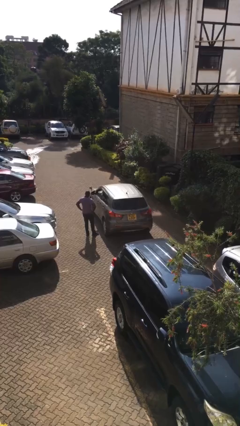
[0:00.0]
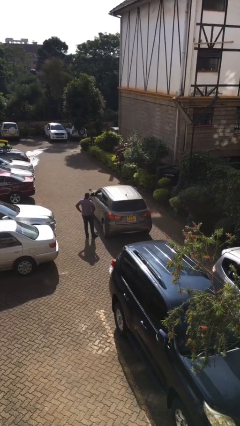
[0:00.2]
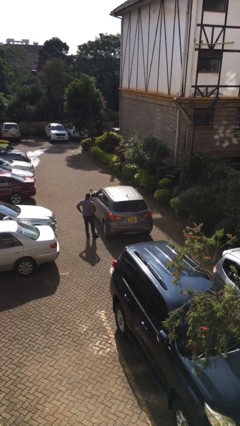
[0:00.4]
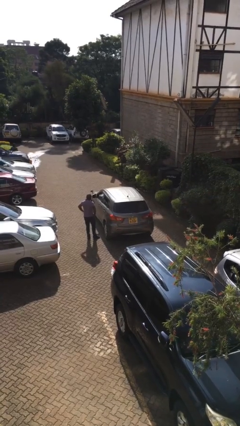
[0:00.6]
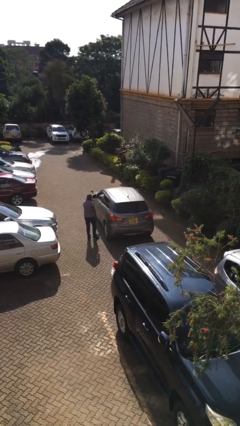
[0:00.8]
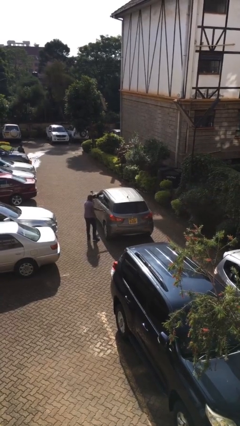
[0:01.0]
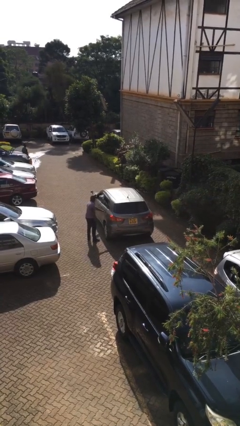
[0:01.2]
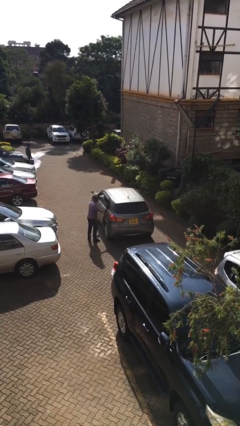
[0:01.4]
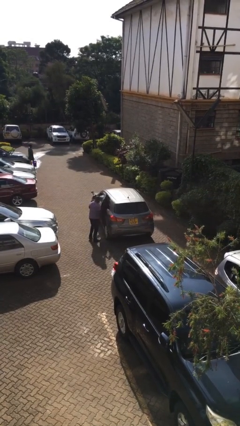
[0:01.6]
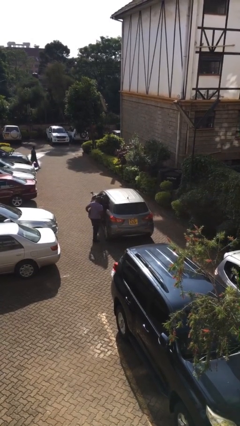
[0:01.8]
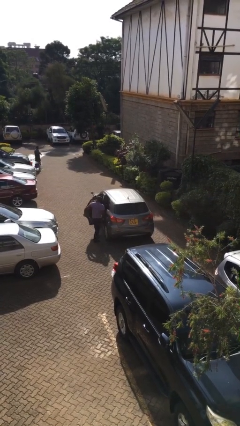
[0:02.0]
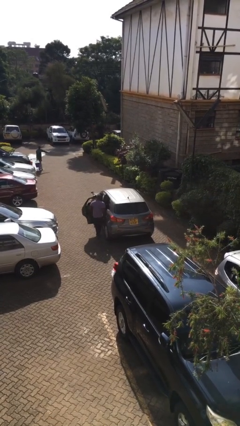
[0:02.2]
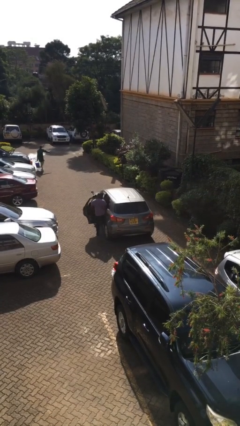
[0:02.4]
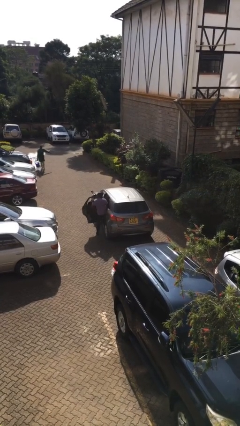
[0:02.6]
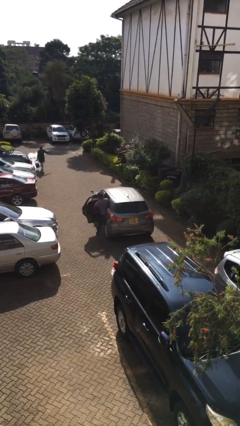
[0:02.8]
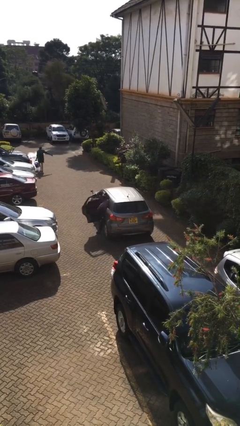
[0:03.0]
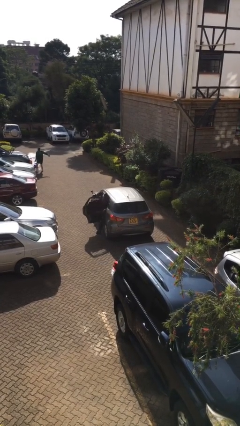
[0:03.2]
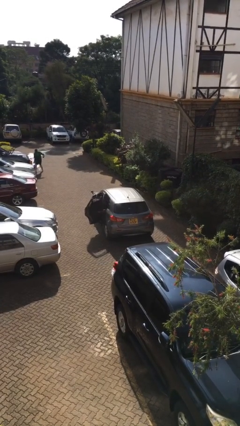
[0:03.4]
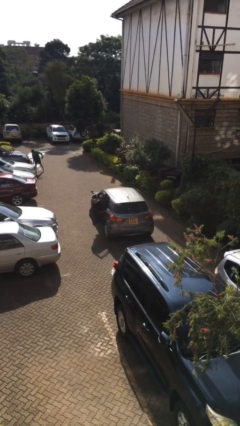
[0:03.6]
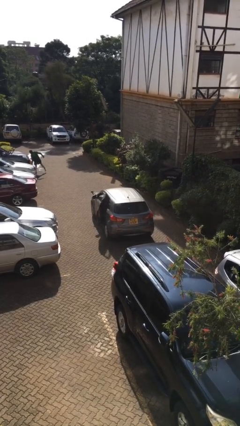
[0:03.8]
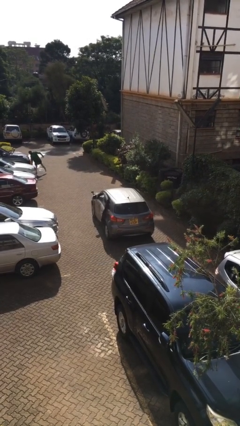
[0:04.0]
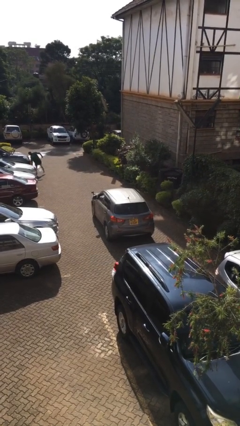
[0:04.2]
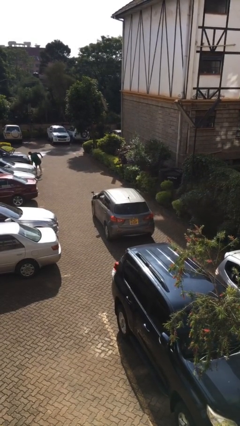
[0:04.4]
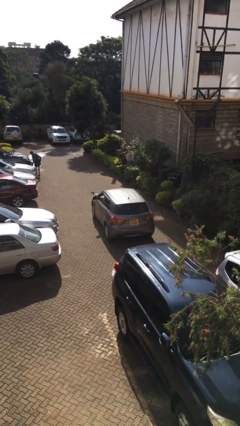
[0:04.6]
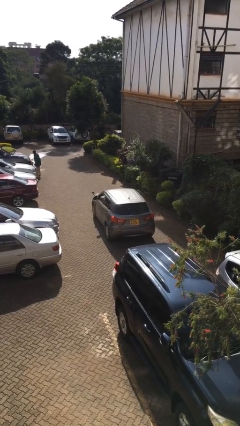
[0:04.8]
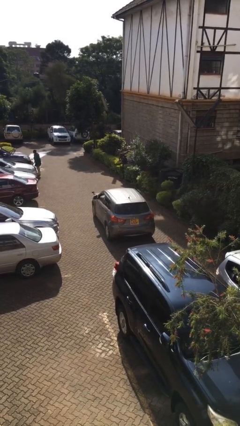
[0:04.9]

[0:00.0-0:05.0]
car picks up person

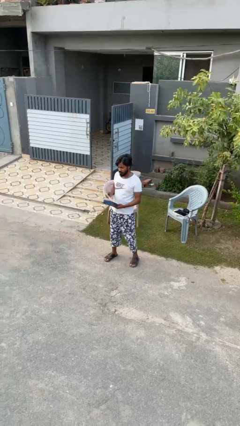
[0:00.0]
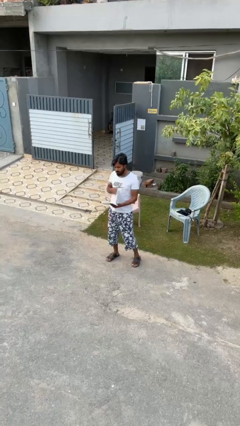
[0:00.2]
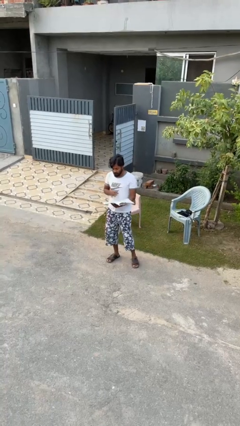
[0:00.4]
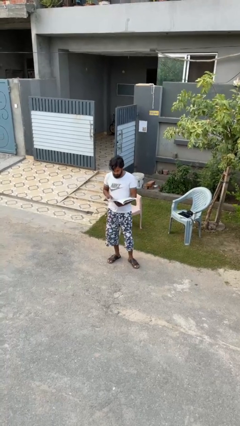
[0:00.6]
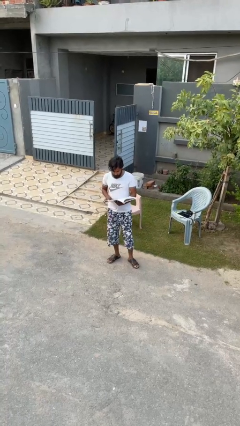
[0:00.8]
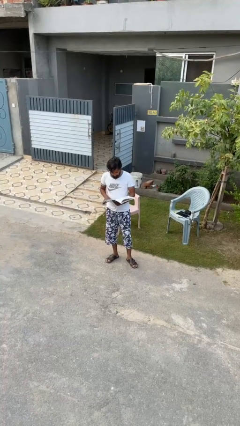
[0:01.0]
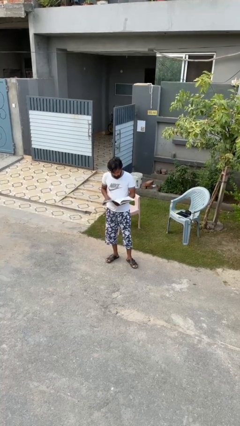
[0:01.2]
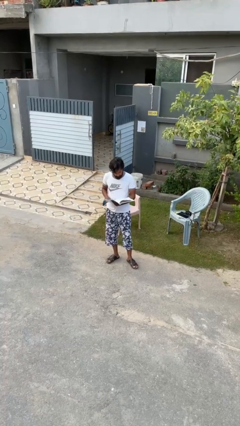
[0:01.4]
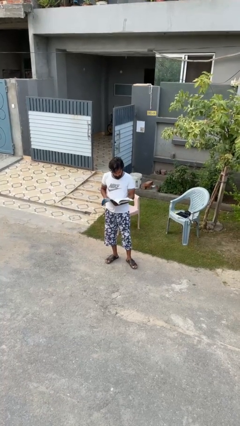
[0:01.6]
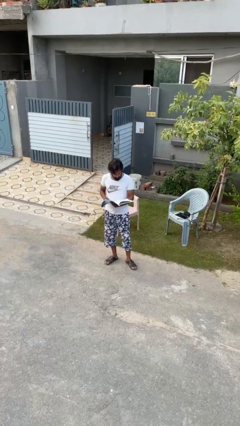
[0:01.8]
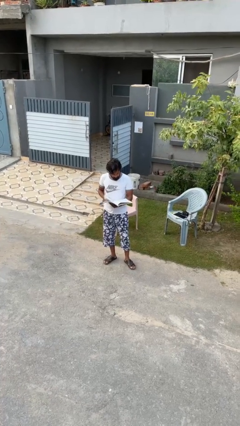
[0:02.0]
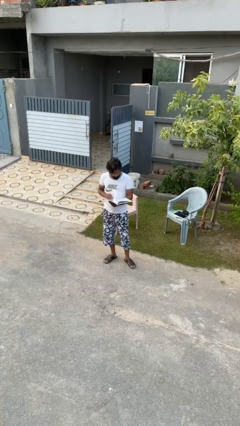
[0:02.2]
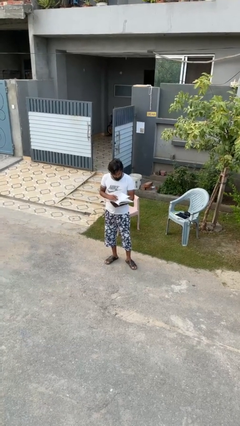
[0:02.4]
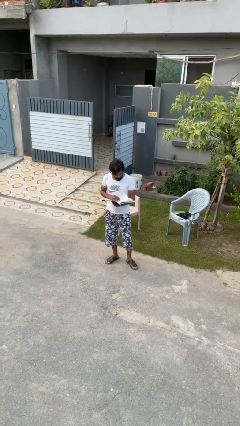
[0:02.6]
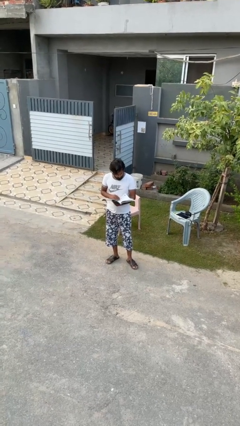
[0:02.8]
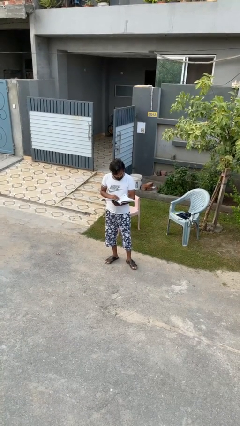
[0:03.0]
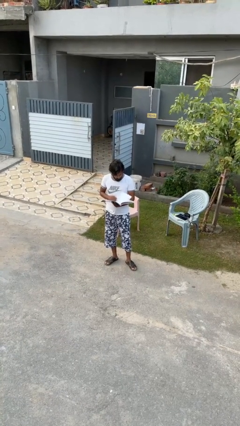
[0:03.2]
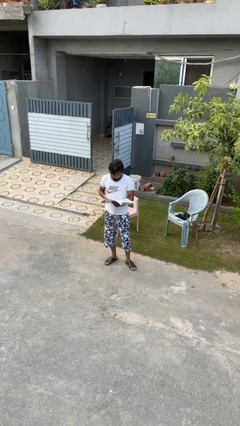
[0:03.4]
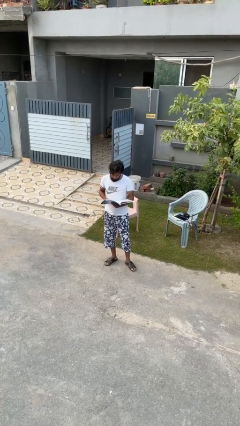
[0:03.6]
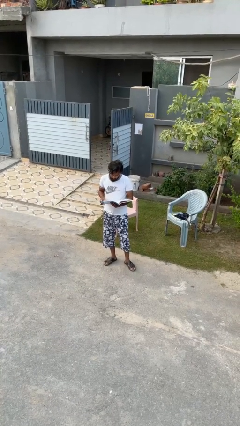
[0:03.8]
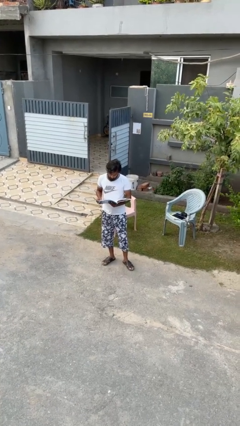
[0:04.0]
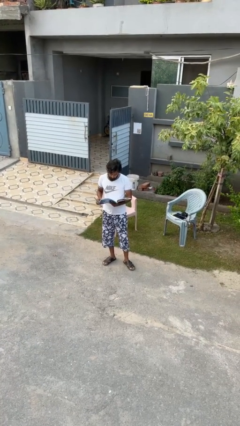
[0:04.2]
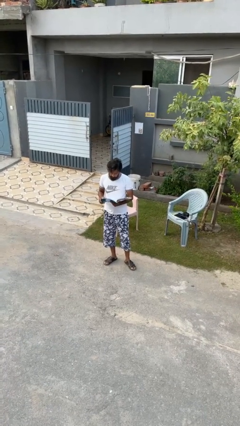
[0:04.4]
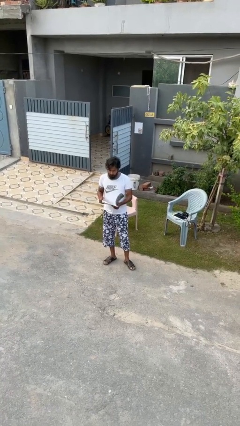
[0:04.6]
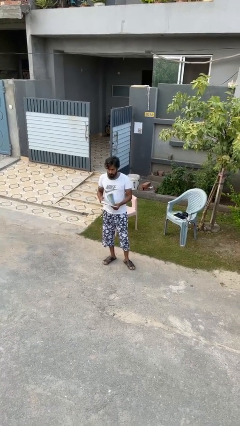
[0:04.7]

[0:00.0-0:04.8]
person reads book

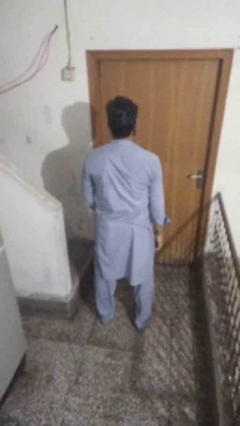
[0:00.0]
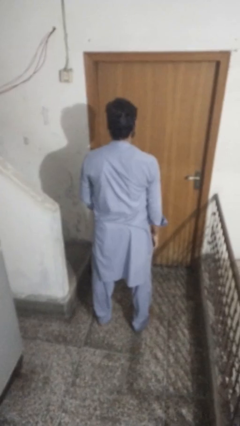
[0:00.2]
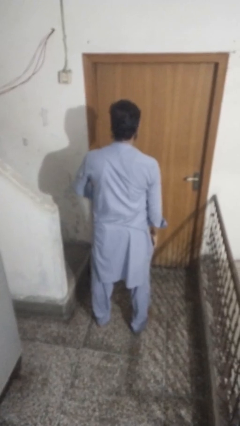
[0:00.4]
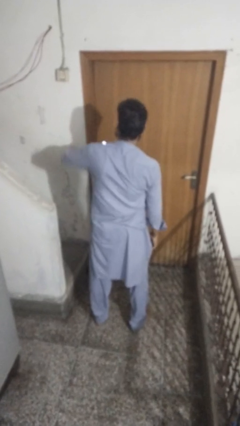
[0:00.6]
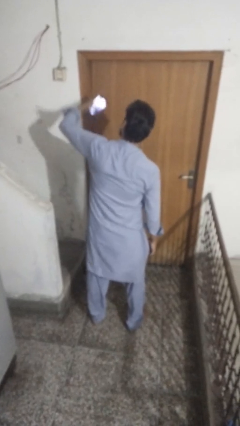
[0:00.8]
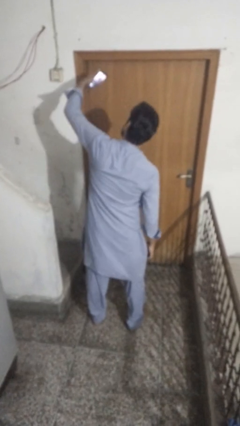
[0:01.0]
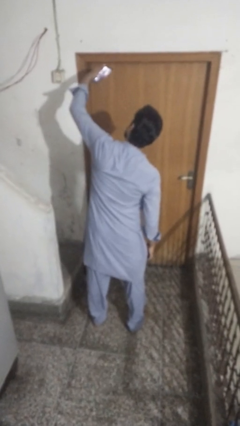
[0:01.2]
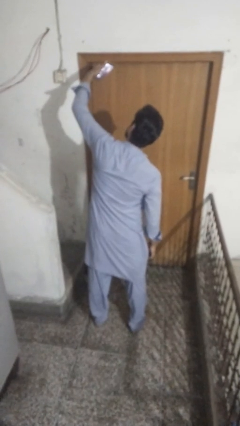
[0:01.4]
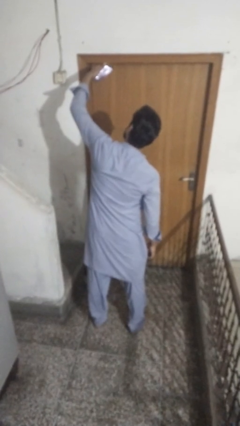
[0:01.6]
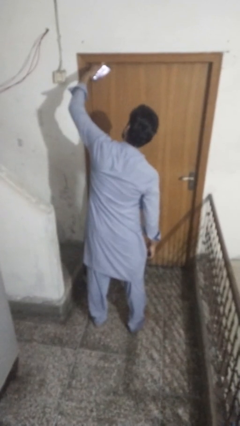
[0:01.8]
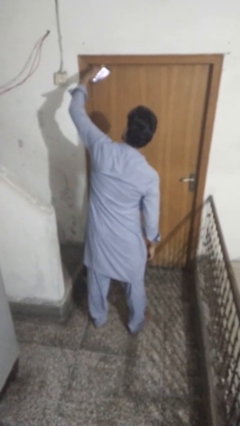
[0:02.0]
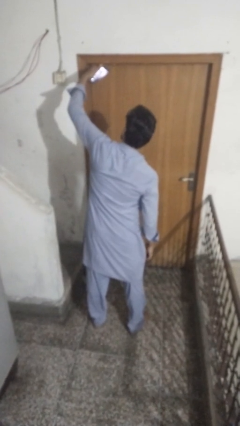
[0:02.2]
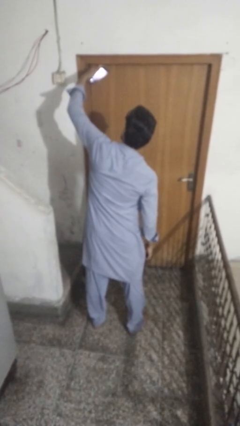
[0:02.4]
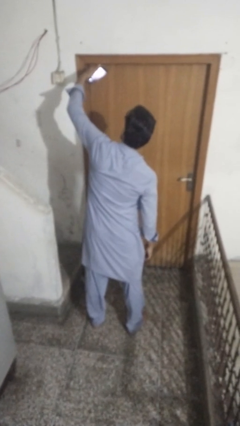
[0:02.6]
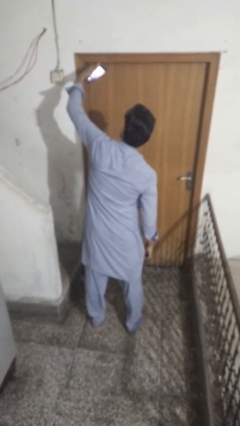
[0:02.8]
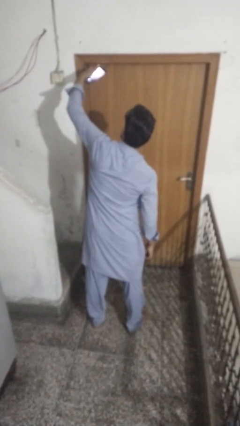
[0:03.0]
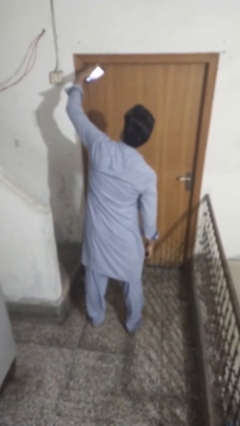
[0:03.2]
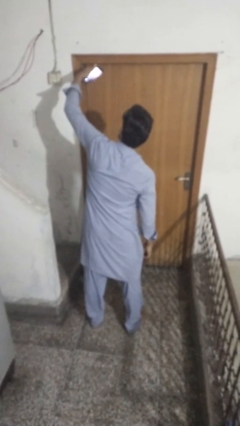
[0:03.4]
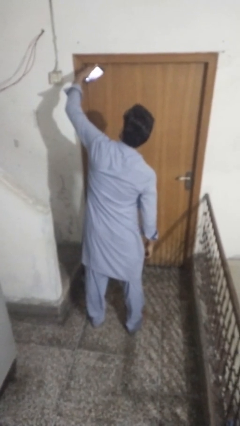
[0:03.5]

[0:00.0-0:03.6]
person takes selfie

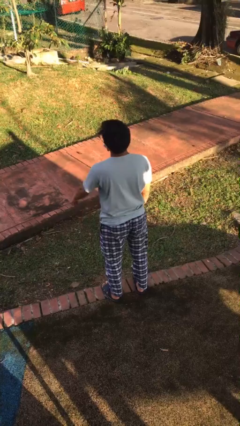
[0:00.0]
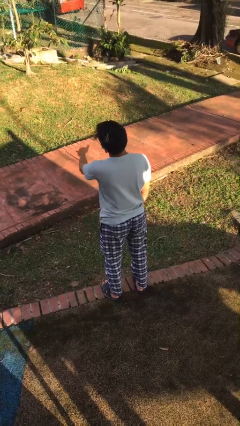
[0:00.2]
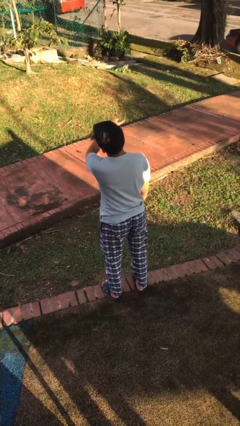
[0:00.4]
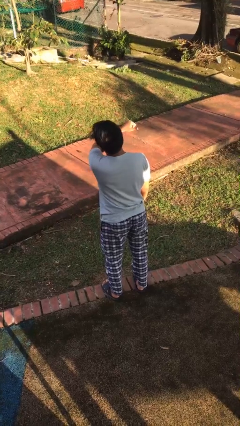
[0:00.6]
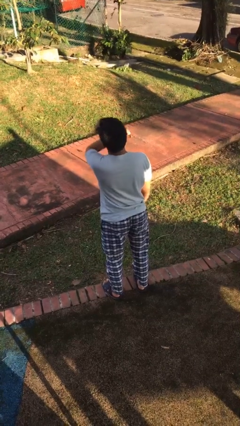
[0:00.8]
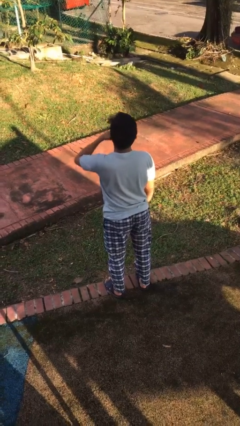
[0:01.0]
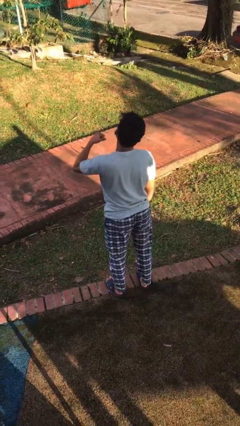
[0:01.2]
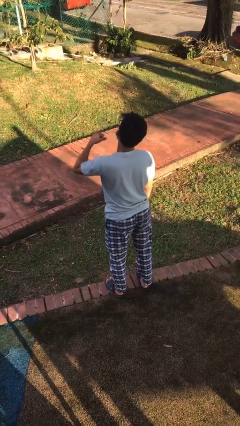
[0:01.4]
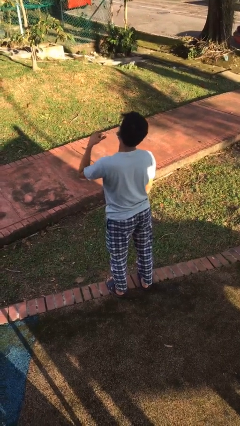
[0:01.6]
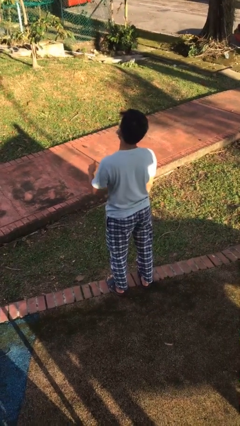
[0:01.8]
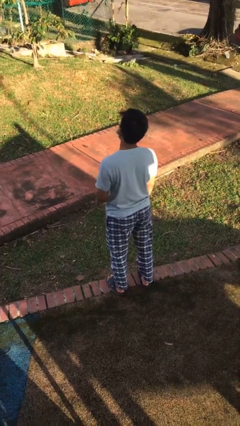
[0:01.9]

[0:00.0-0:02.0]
person gestures cut

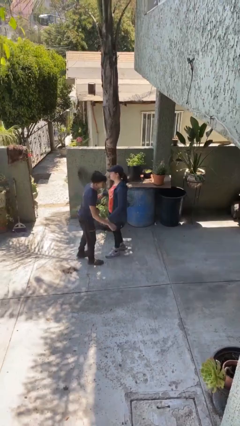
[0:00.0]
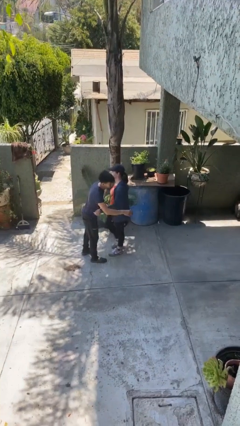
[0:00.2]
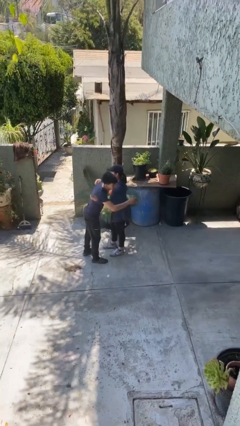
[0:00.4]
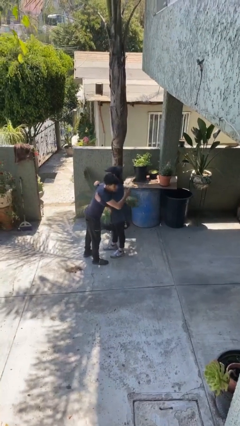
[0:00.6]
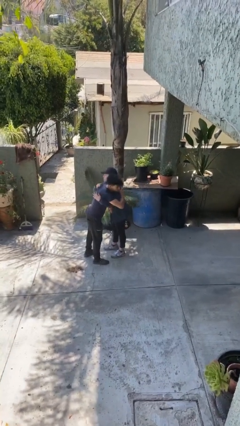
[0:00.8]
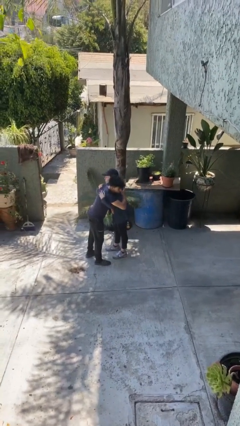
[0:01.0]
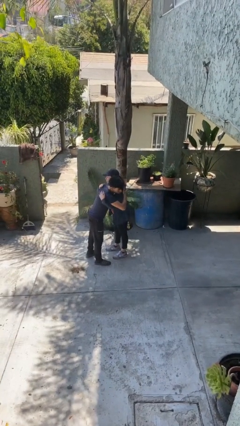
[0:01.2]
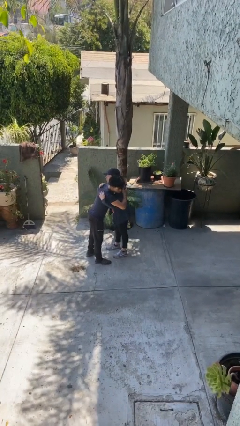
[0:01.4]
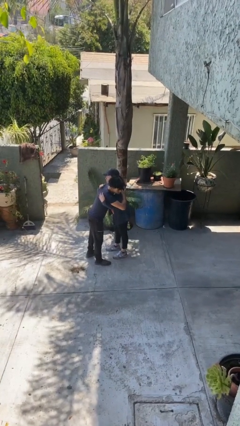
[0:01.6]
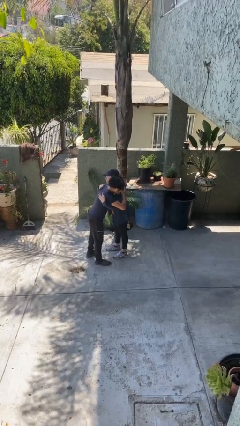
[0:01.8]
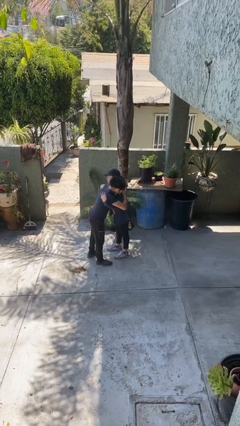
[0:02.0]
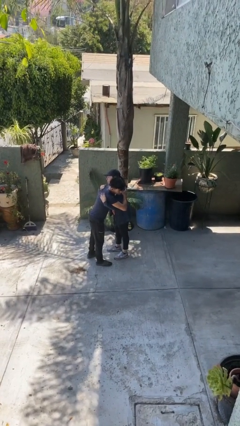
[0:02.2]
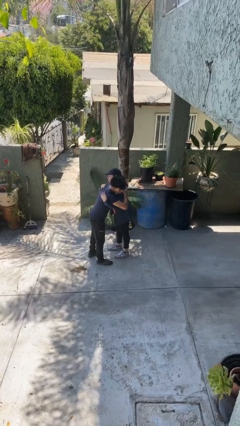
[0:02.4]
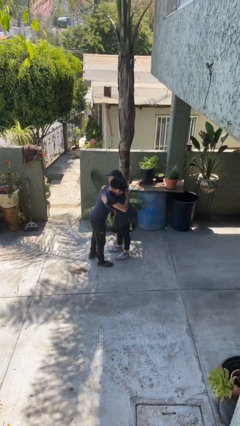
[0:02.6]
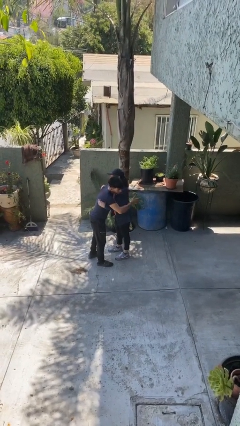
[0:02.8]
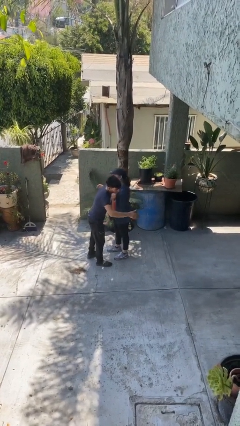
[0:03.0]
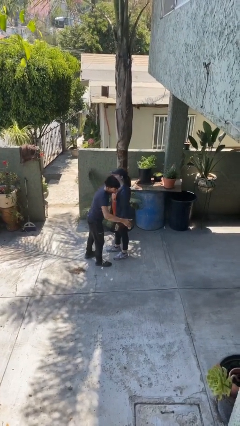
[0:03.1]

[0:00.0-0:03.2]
person embraces person
